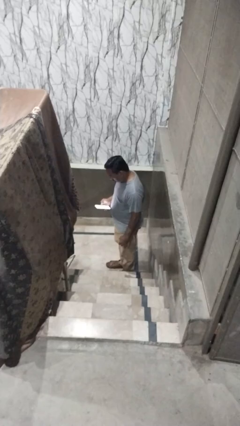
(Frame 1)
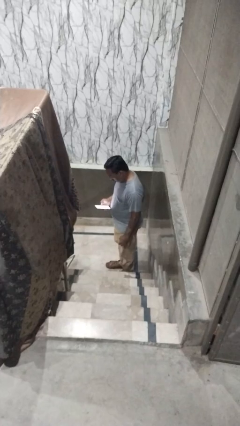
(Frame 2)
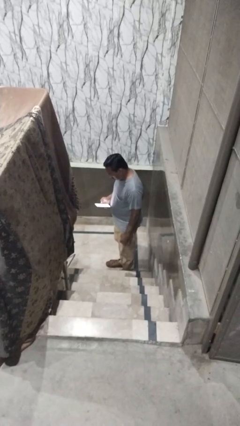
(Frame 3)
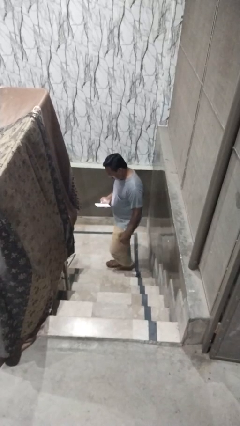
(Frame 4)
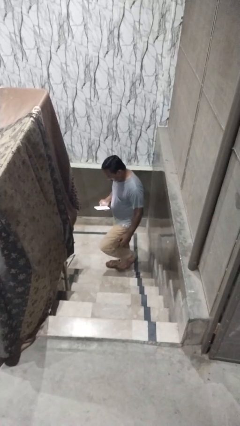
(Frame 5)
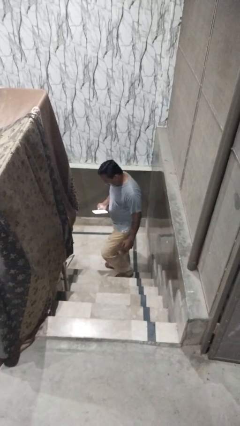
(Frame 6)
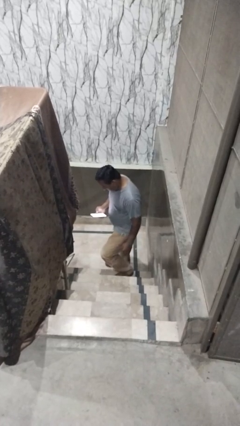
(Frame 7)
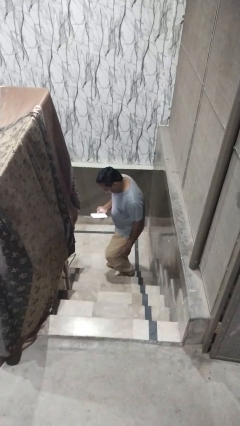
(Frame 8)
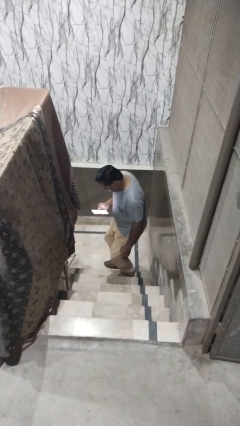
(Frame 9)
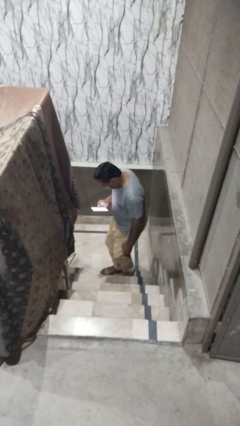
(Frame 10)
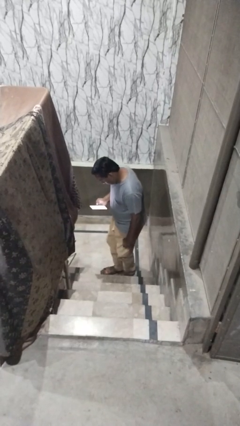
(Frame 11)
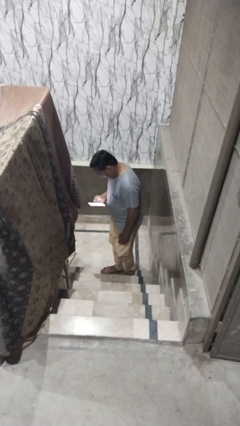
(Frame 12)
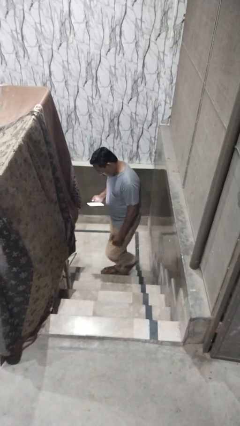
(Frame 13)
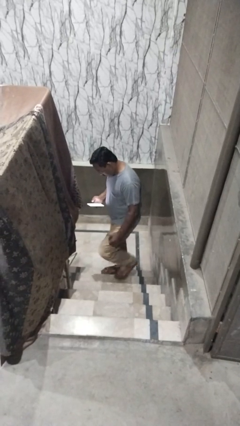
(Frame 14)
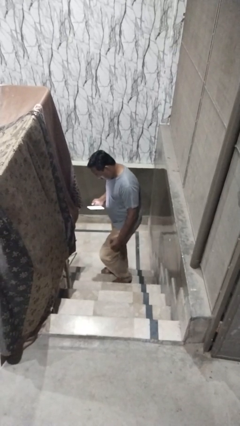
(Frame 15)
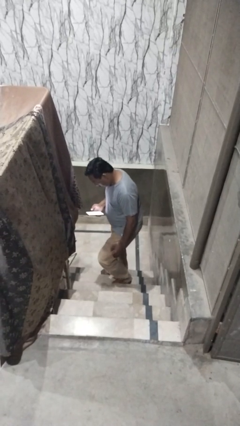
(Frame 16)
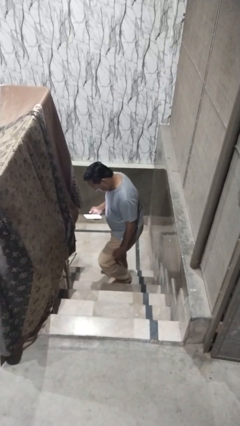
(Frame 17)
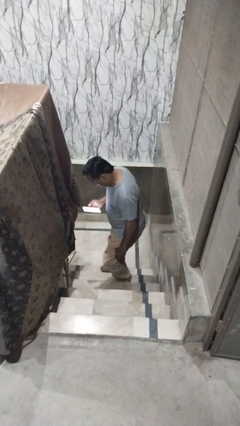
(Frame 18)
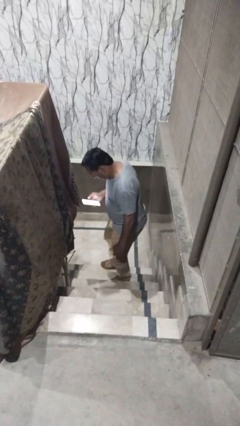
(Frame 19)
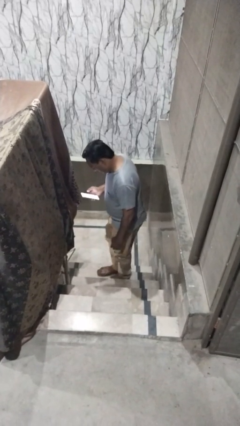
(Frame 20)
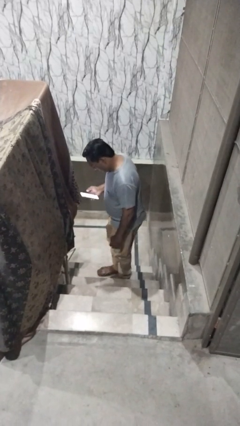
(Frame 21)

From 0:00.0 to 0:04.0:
person climbs up stairs

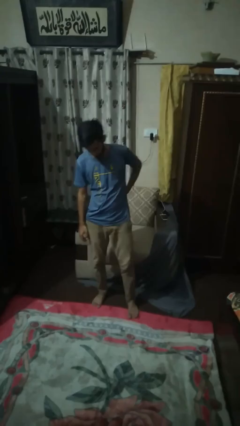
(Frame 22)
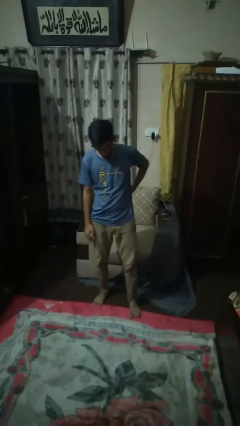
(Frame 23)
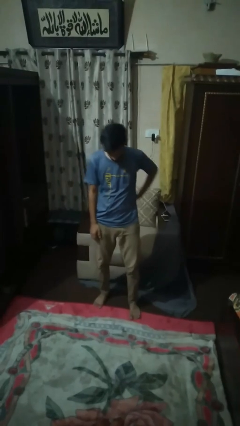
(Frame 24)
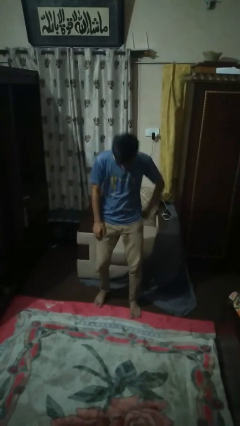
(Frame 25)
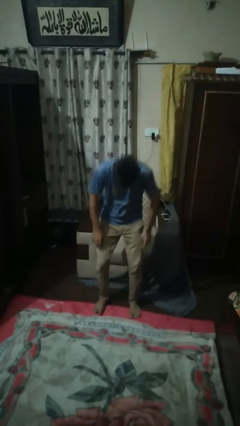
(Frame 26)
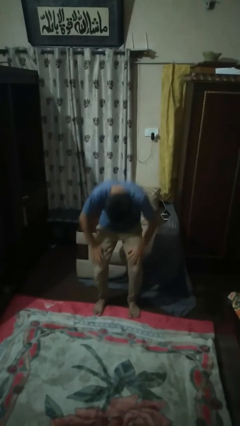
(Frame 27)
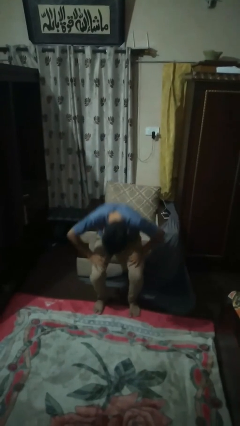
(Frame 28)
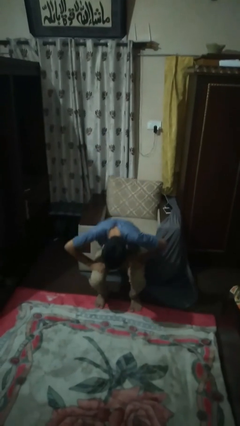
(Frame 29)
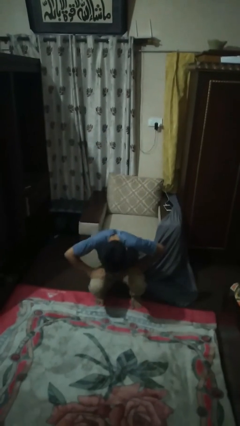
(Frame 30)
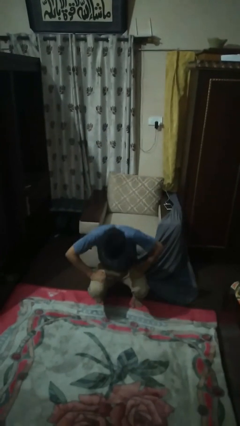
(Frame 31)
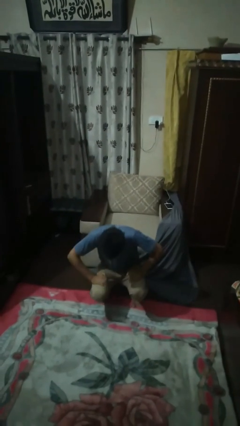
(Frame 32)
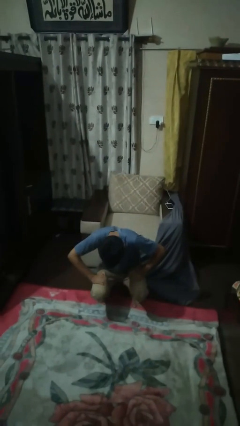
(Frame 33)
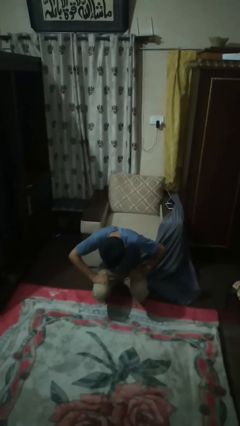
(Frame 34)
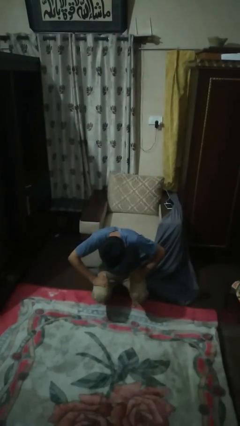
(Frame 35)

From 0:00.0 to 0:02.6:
person squats

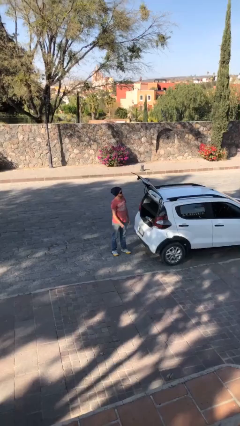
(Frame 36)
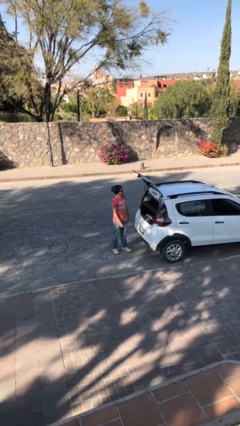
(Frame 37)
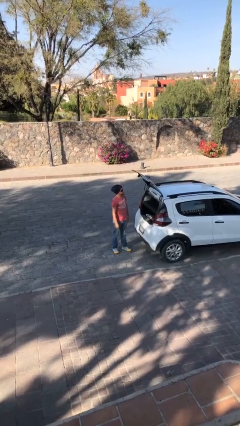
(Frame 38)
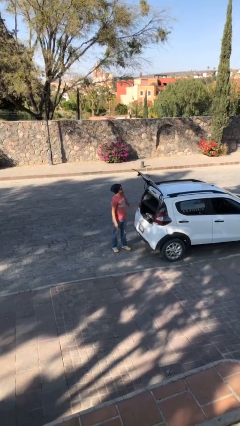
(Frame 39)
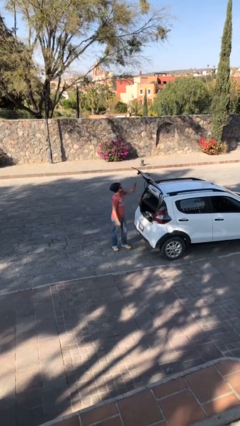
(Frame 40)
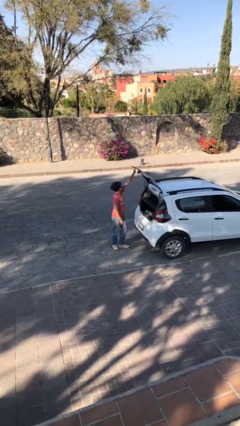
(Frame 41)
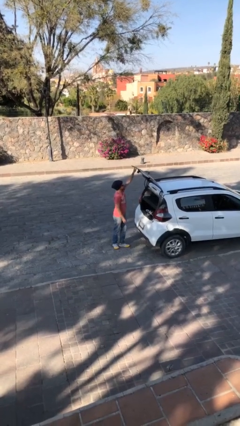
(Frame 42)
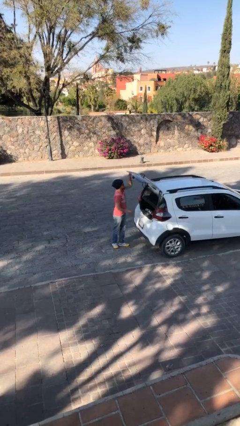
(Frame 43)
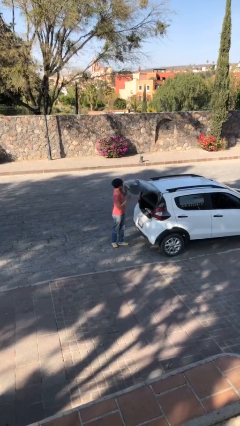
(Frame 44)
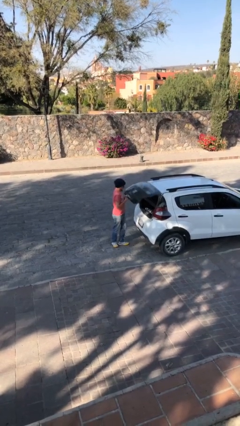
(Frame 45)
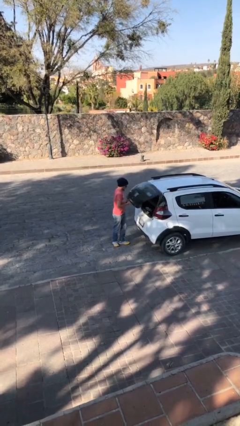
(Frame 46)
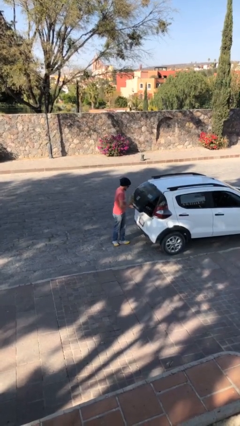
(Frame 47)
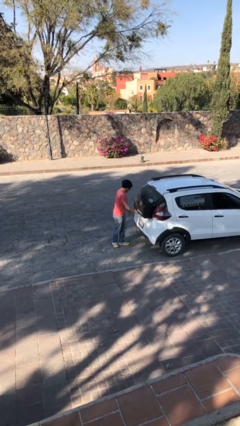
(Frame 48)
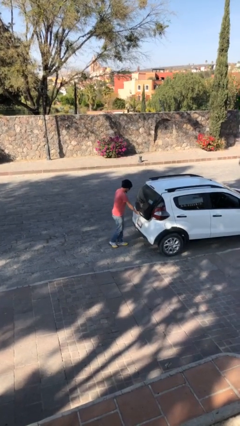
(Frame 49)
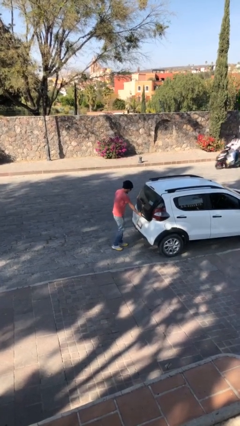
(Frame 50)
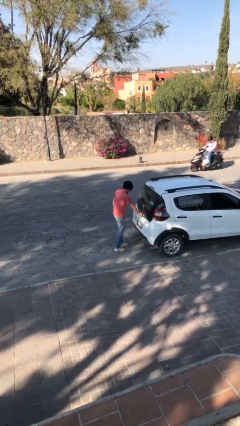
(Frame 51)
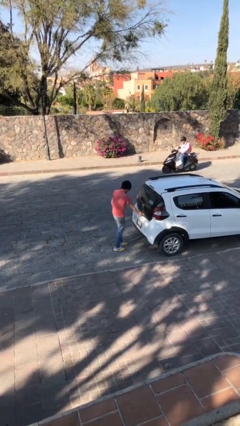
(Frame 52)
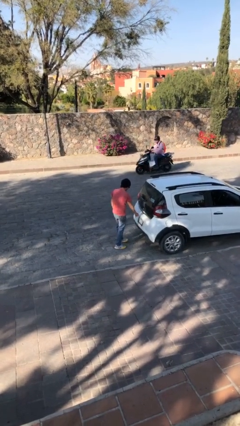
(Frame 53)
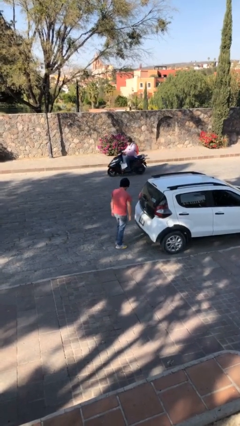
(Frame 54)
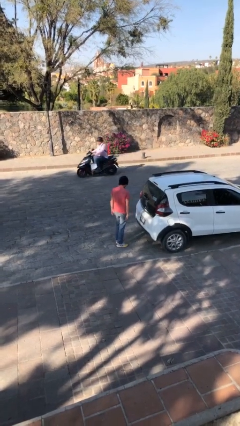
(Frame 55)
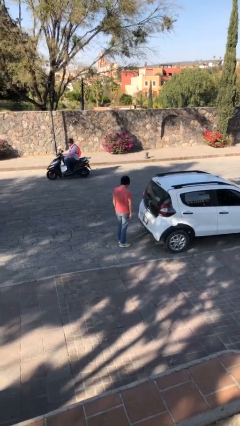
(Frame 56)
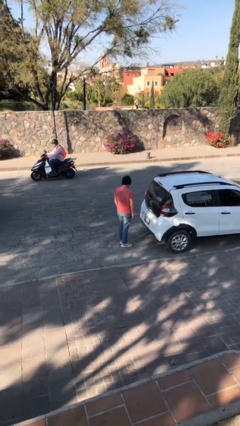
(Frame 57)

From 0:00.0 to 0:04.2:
person closes car trunk

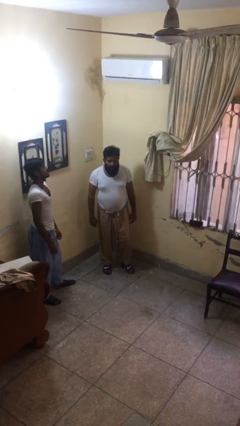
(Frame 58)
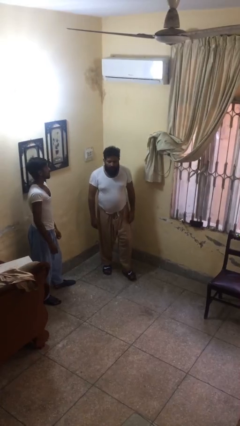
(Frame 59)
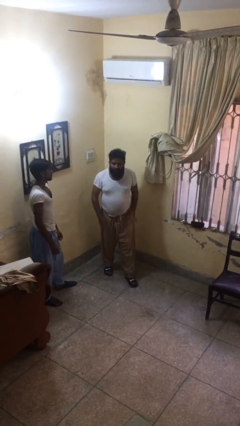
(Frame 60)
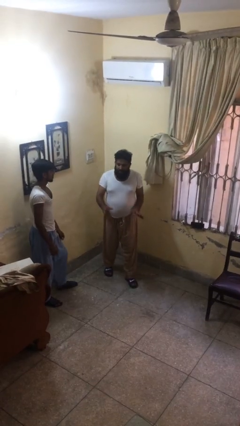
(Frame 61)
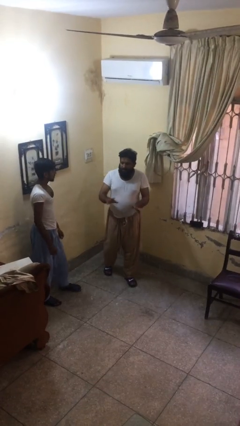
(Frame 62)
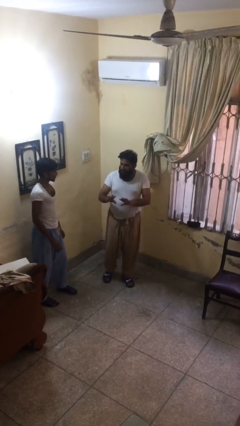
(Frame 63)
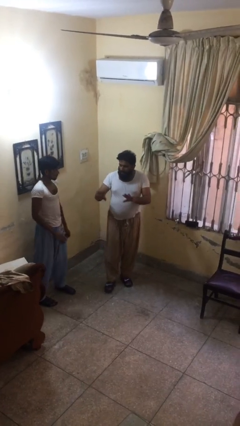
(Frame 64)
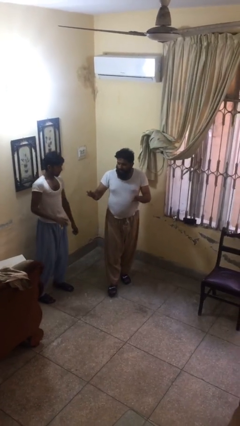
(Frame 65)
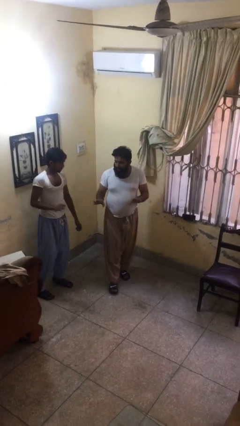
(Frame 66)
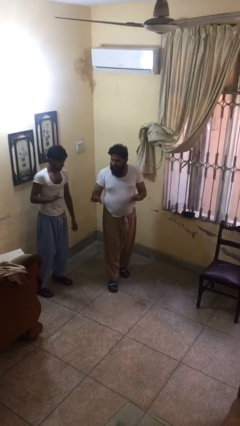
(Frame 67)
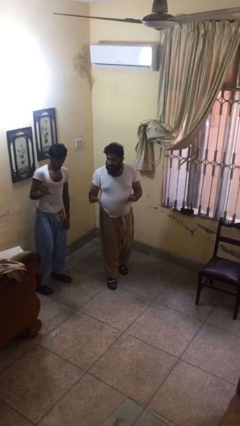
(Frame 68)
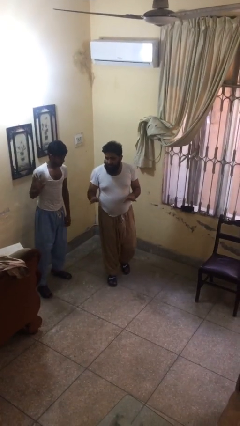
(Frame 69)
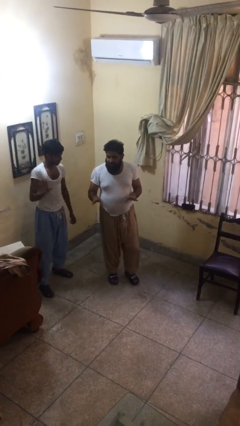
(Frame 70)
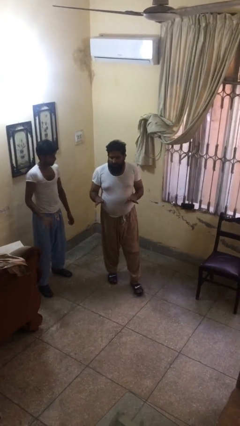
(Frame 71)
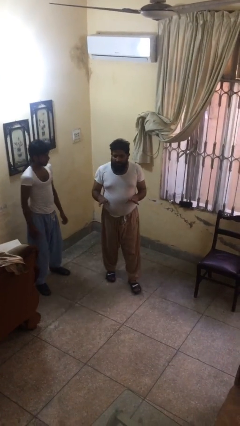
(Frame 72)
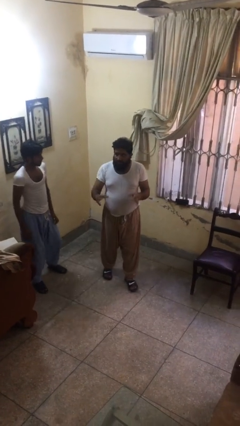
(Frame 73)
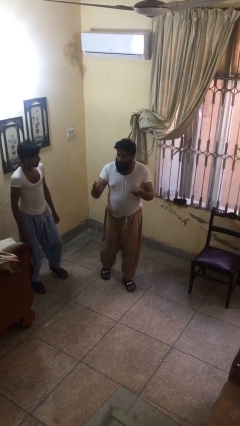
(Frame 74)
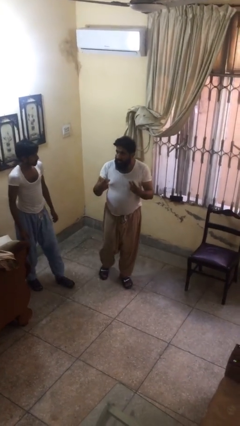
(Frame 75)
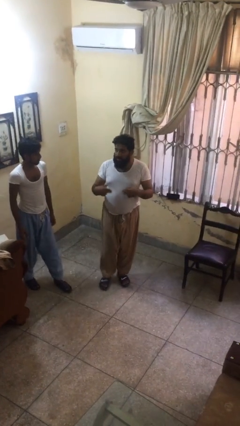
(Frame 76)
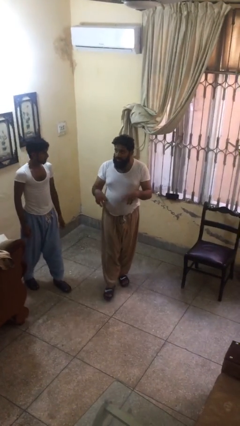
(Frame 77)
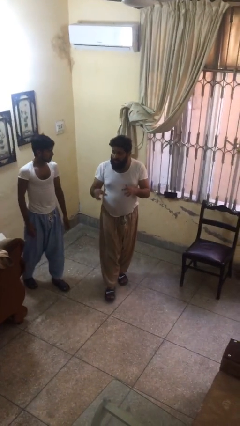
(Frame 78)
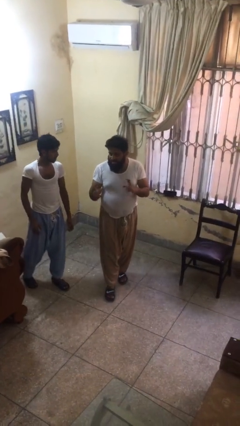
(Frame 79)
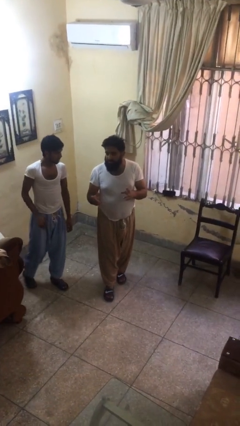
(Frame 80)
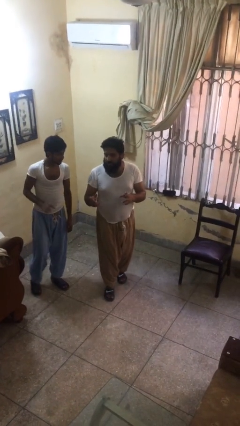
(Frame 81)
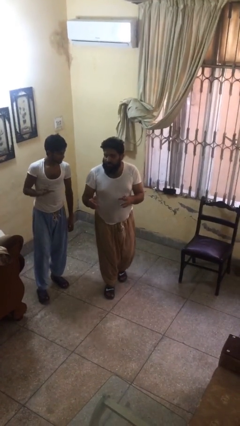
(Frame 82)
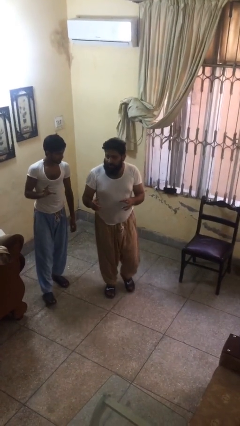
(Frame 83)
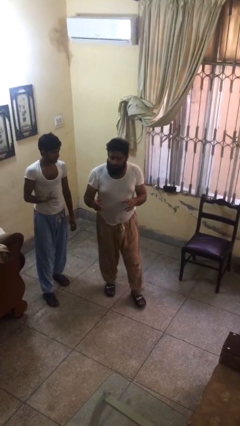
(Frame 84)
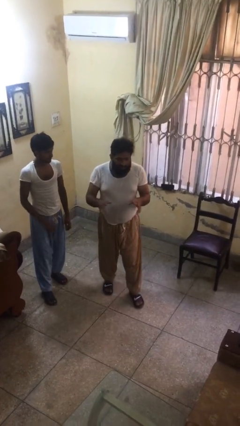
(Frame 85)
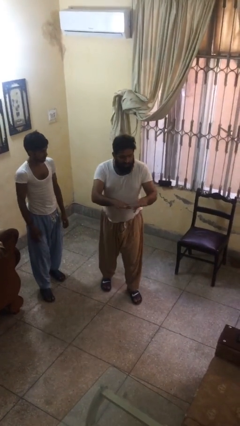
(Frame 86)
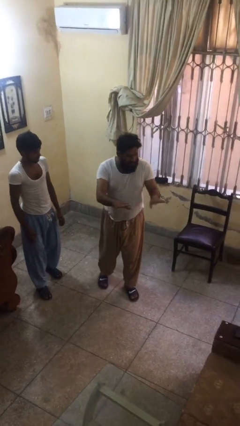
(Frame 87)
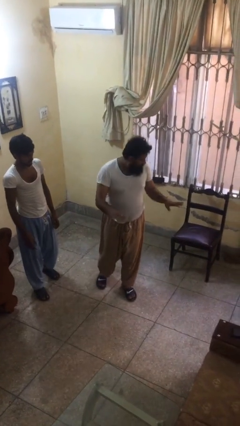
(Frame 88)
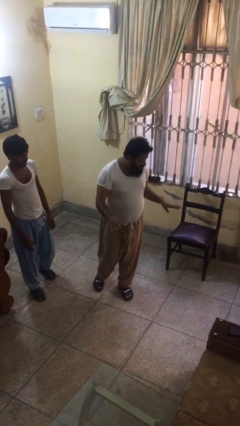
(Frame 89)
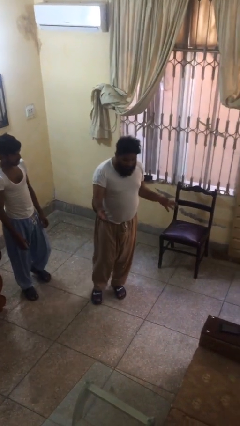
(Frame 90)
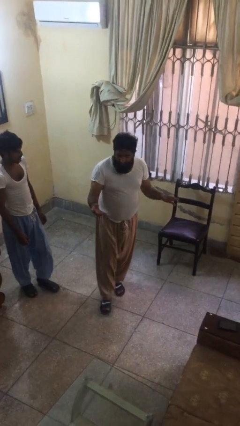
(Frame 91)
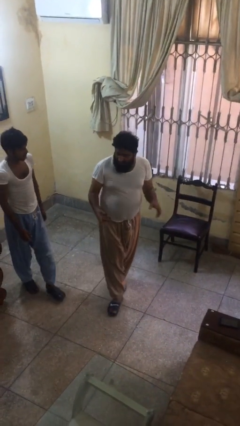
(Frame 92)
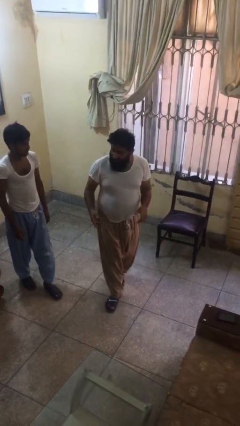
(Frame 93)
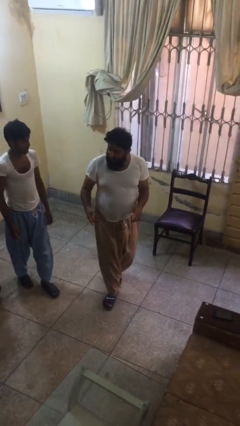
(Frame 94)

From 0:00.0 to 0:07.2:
person talks to person
